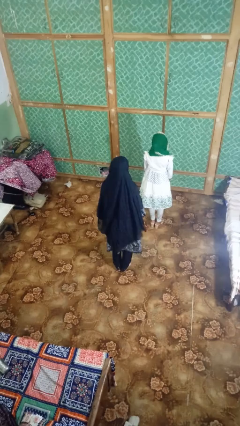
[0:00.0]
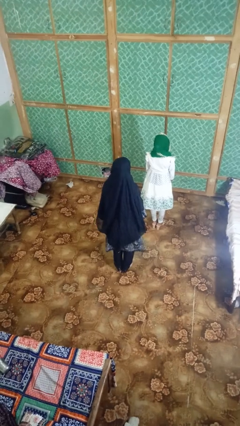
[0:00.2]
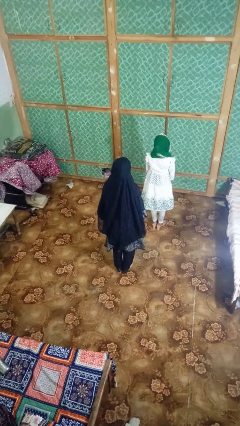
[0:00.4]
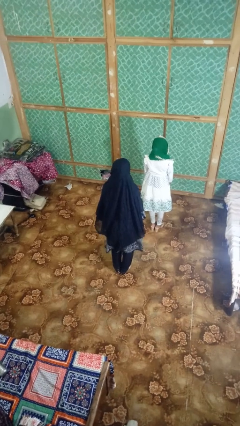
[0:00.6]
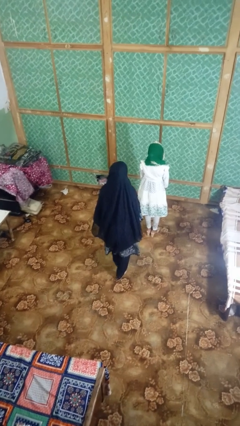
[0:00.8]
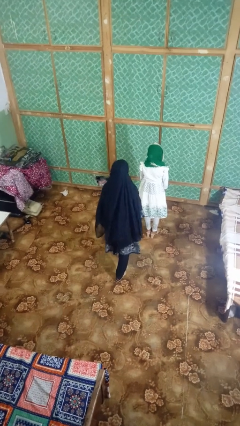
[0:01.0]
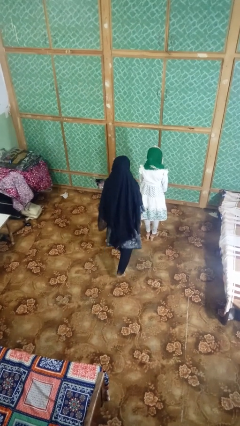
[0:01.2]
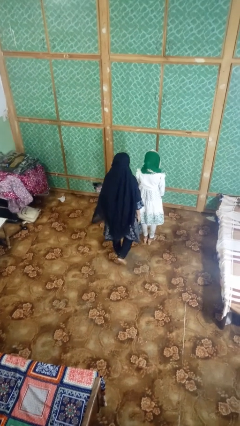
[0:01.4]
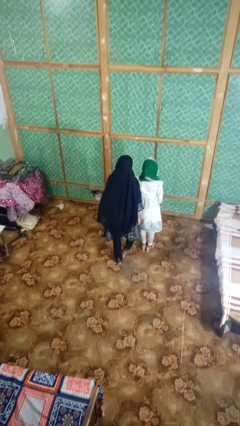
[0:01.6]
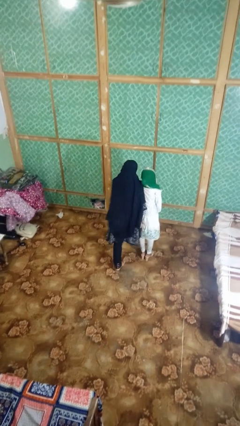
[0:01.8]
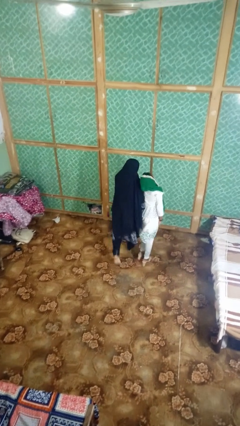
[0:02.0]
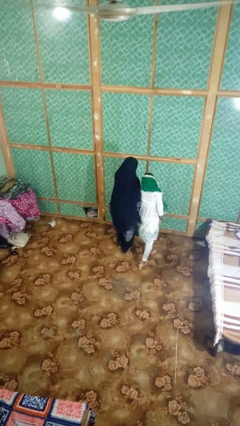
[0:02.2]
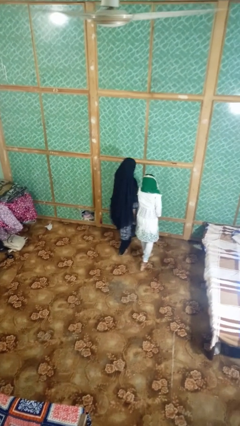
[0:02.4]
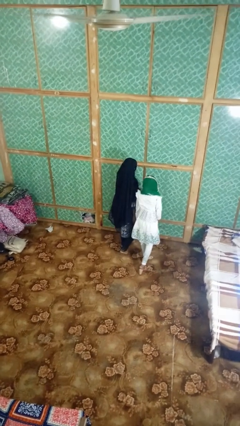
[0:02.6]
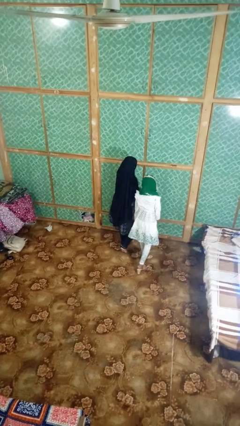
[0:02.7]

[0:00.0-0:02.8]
person bumps into person

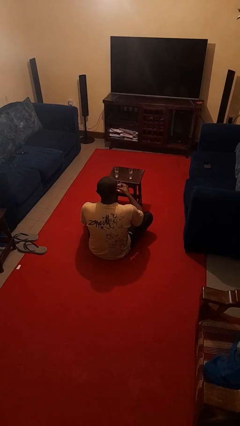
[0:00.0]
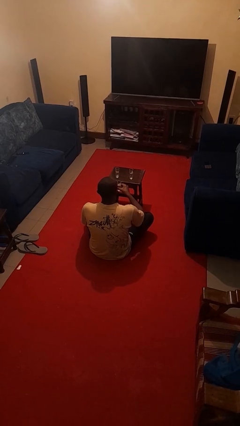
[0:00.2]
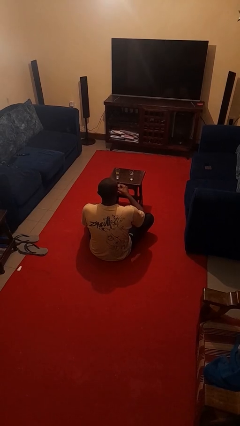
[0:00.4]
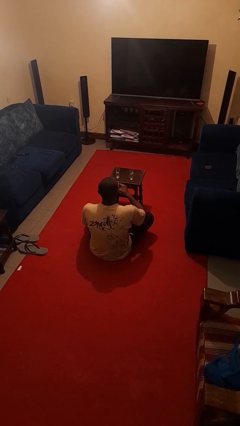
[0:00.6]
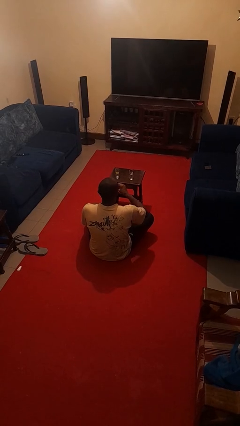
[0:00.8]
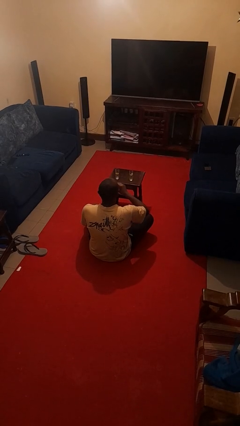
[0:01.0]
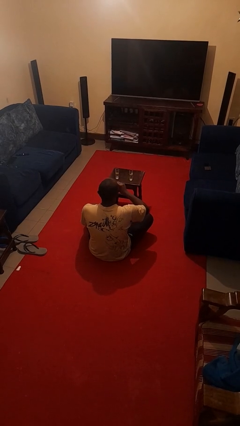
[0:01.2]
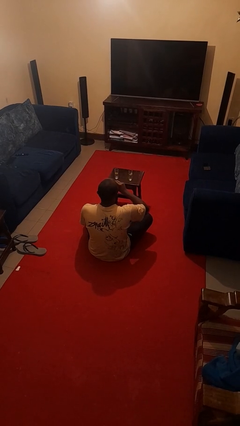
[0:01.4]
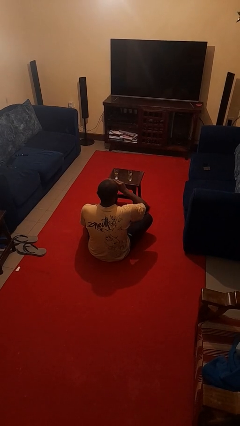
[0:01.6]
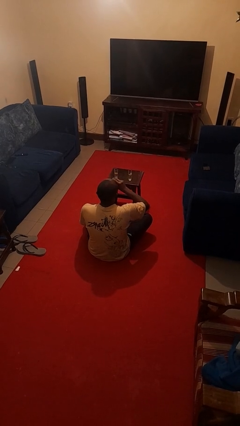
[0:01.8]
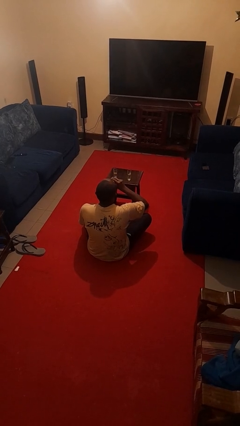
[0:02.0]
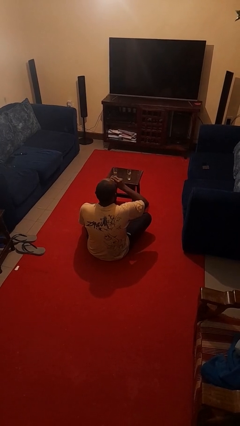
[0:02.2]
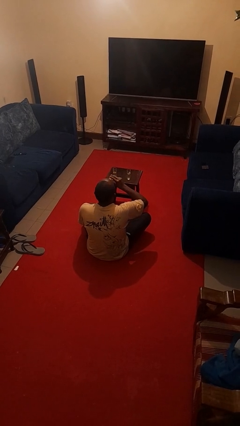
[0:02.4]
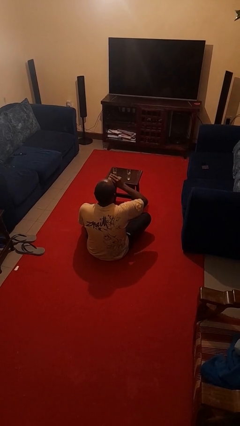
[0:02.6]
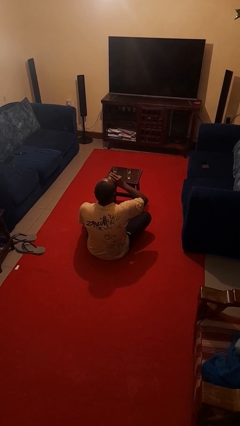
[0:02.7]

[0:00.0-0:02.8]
person drinks from shotglass

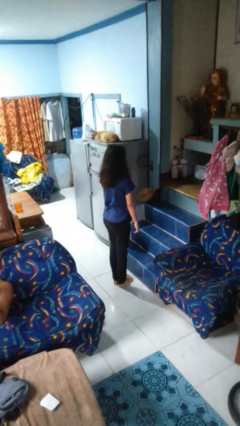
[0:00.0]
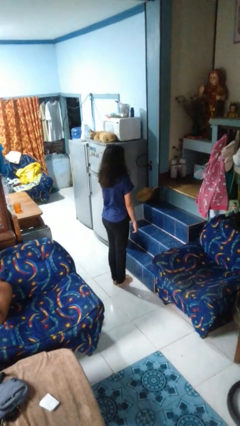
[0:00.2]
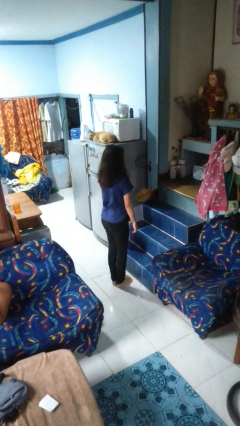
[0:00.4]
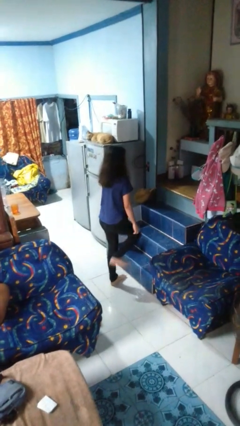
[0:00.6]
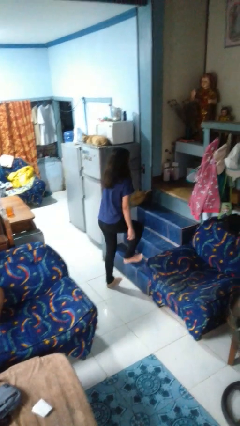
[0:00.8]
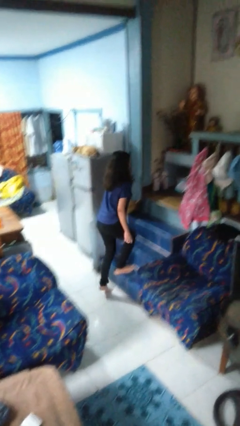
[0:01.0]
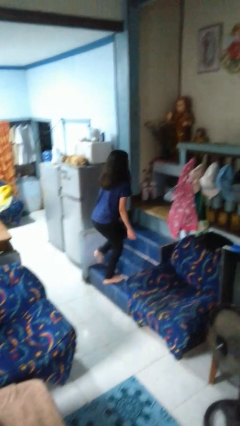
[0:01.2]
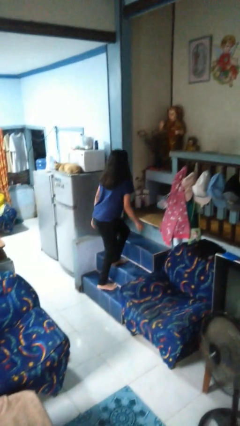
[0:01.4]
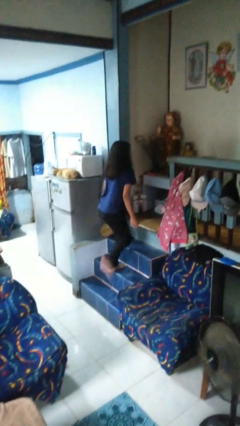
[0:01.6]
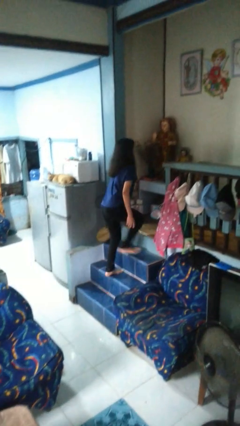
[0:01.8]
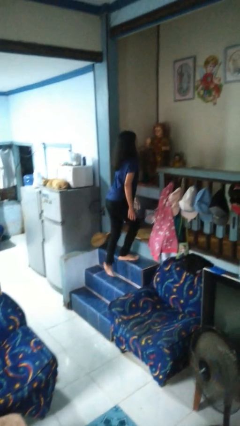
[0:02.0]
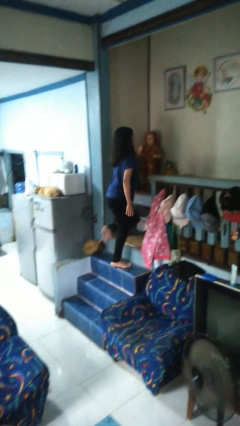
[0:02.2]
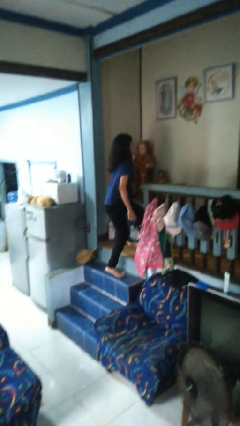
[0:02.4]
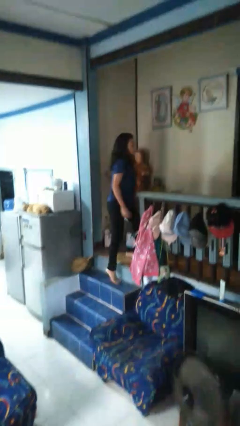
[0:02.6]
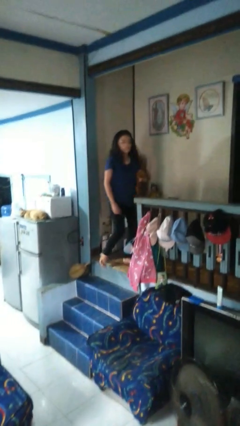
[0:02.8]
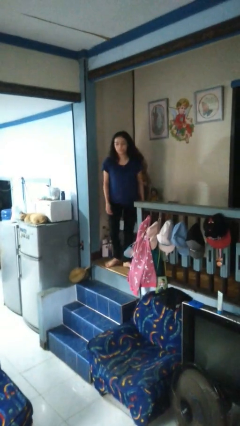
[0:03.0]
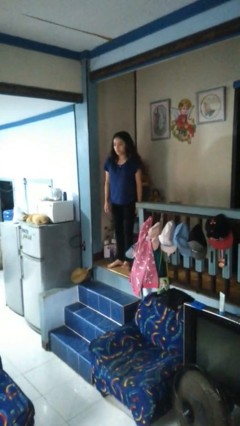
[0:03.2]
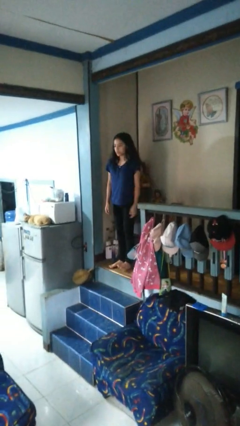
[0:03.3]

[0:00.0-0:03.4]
person climbs up stairs

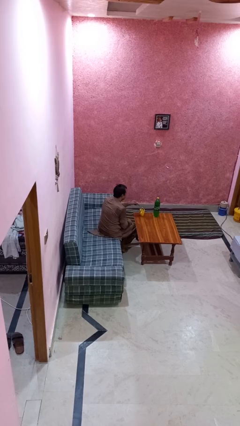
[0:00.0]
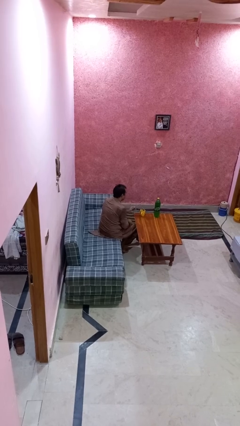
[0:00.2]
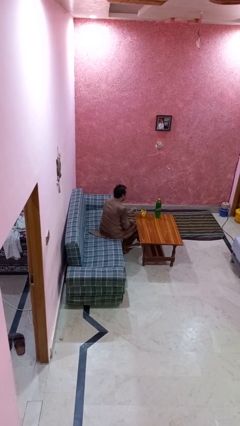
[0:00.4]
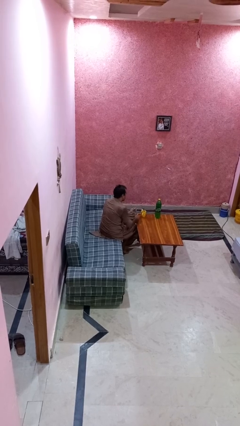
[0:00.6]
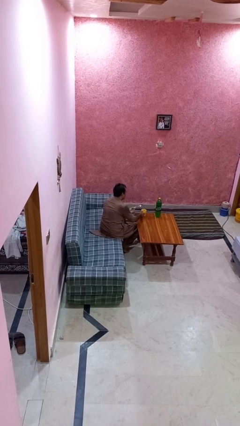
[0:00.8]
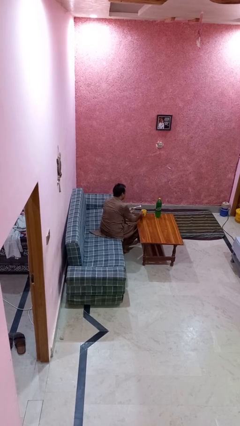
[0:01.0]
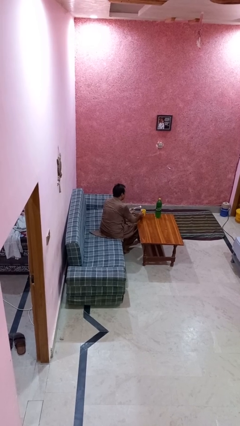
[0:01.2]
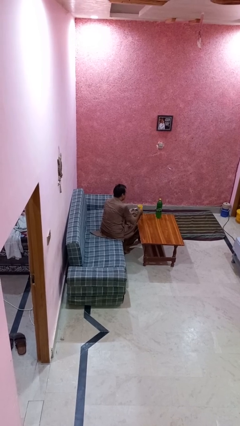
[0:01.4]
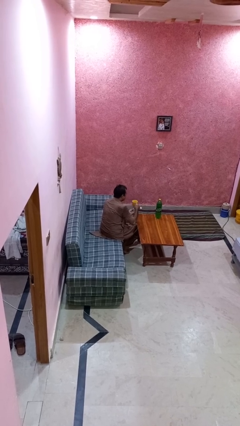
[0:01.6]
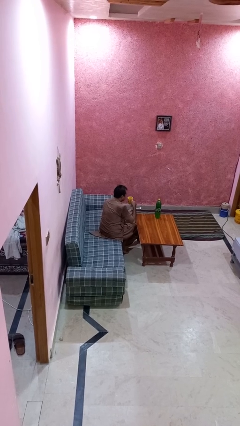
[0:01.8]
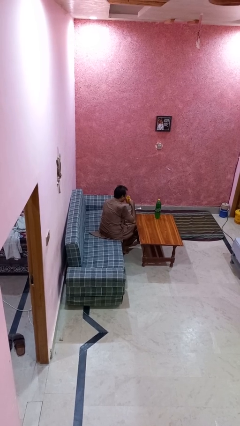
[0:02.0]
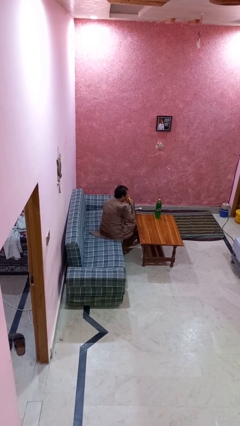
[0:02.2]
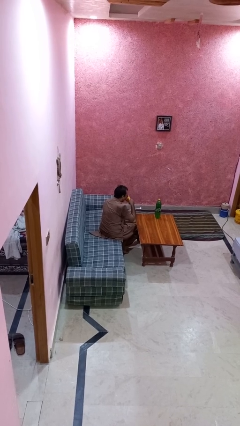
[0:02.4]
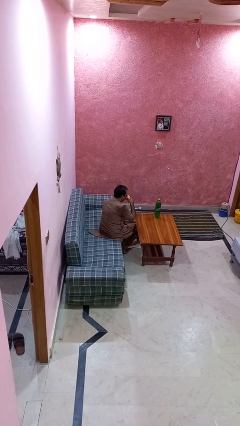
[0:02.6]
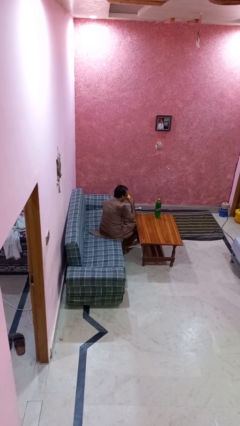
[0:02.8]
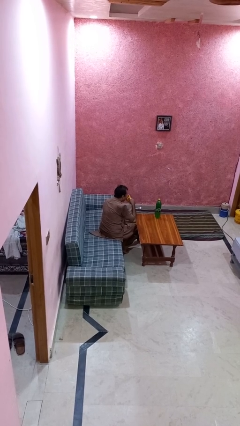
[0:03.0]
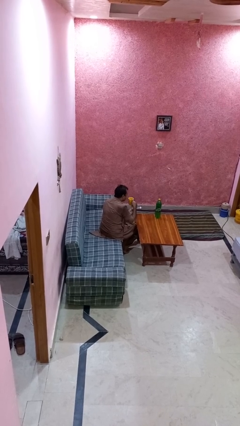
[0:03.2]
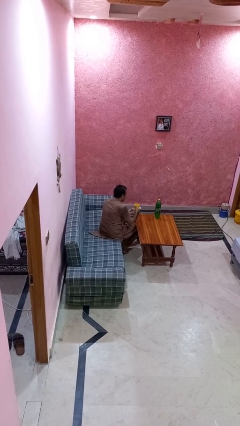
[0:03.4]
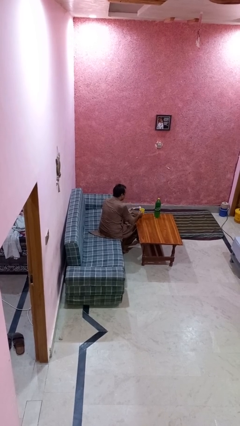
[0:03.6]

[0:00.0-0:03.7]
person drinks from mug

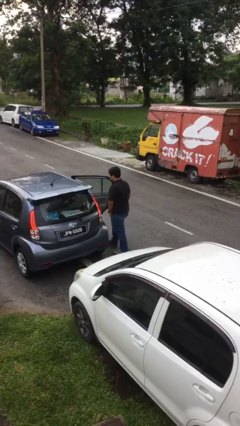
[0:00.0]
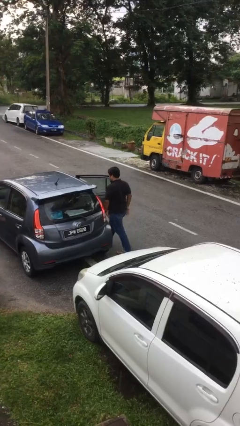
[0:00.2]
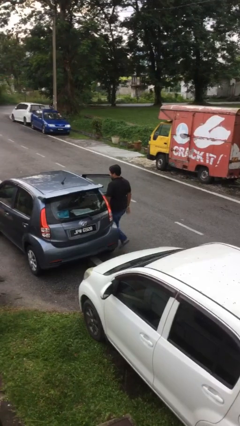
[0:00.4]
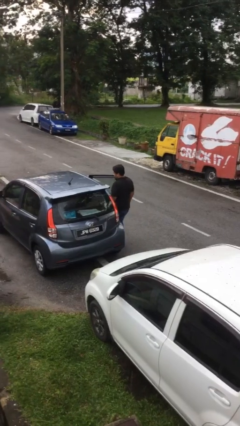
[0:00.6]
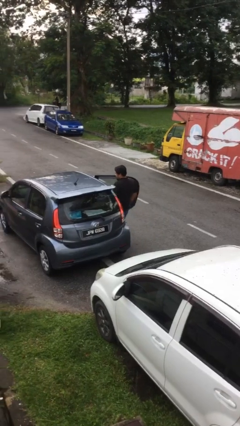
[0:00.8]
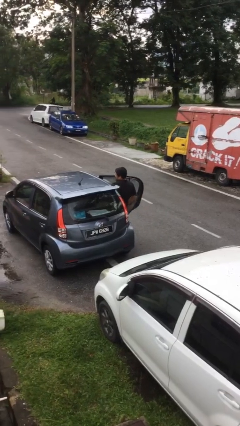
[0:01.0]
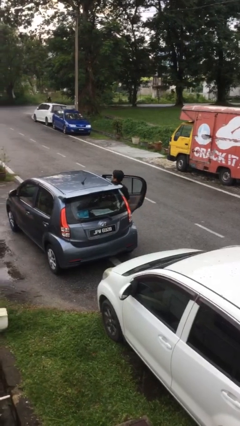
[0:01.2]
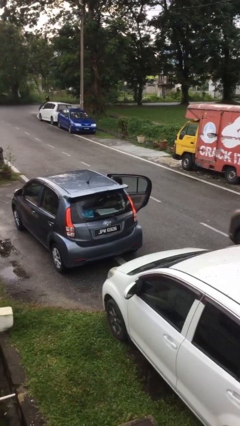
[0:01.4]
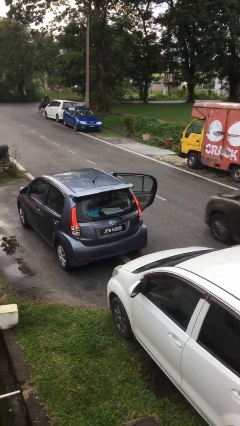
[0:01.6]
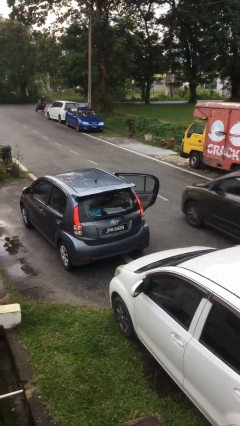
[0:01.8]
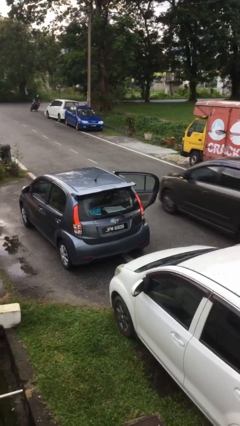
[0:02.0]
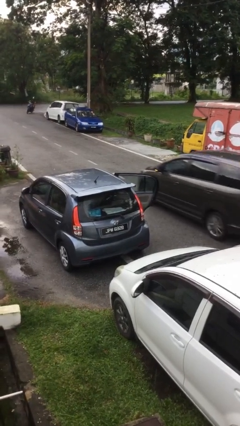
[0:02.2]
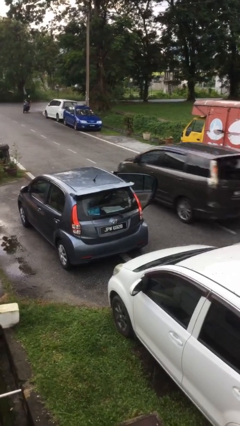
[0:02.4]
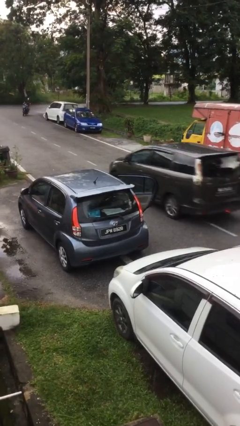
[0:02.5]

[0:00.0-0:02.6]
person enters car

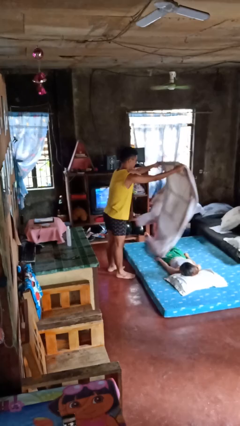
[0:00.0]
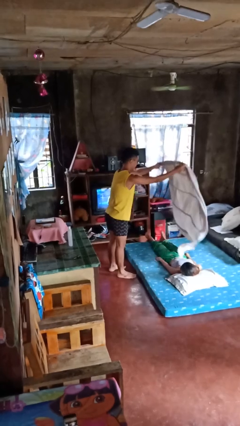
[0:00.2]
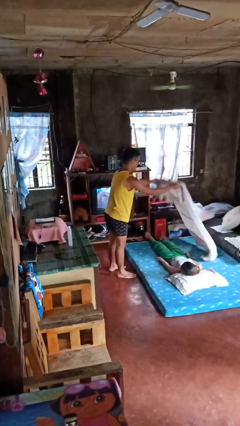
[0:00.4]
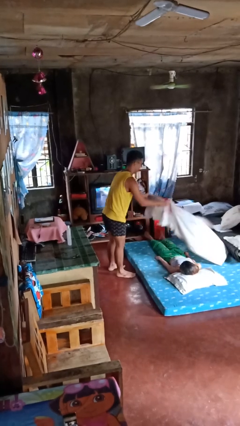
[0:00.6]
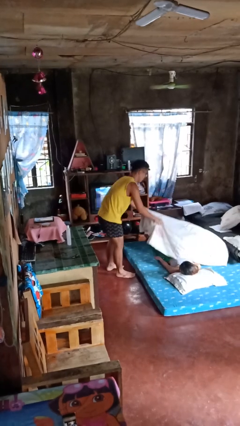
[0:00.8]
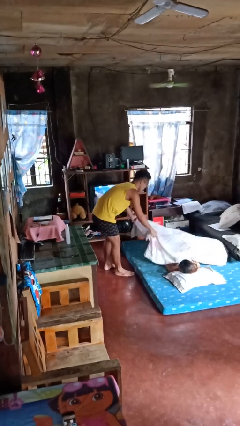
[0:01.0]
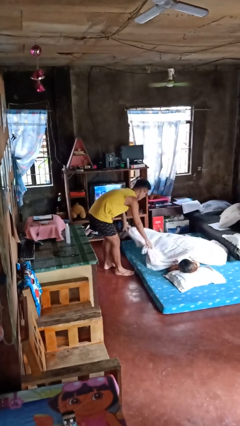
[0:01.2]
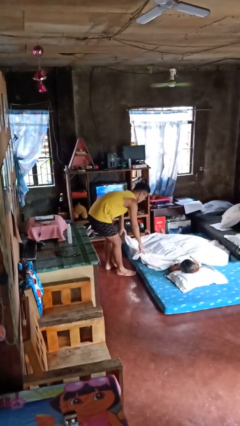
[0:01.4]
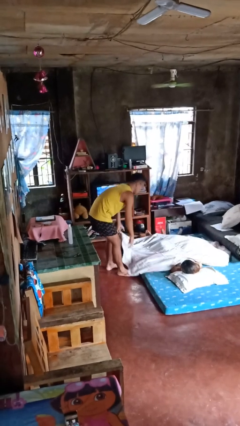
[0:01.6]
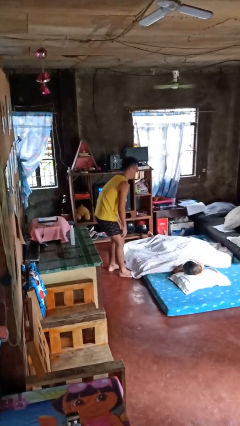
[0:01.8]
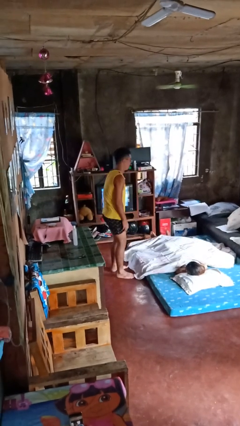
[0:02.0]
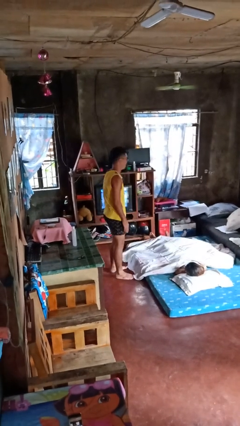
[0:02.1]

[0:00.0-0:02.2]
person covers friend with blanket
